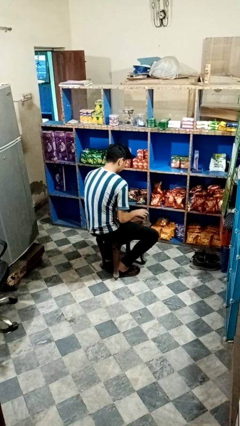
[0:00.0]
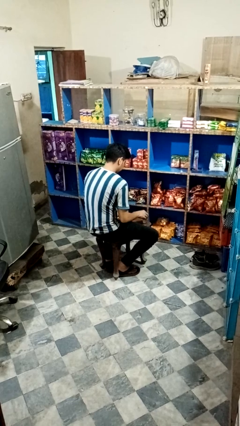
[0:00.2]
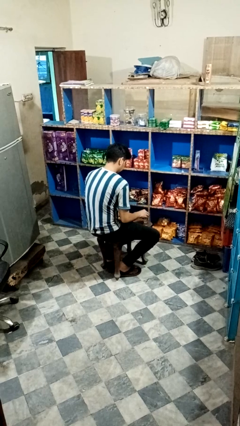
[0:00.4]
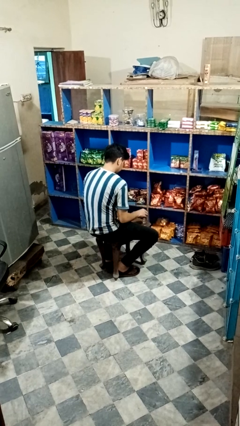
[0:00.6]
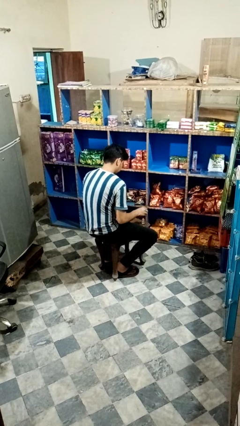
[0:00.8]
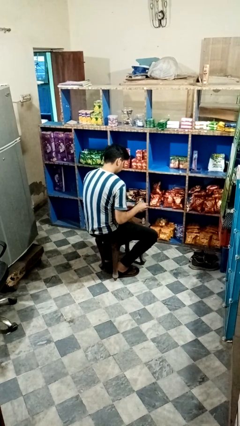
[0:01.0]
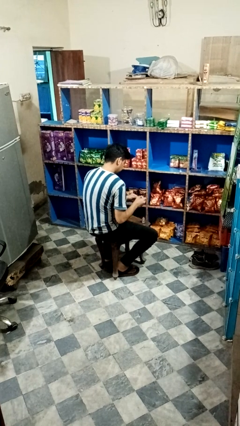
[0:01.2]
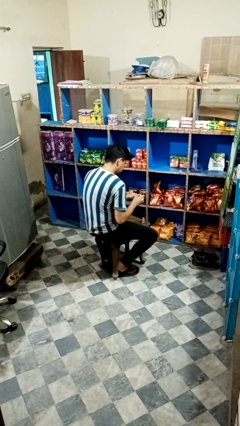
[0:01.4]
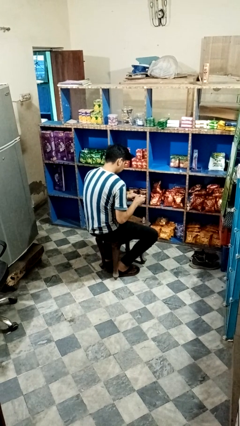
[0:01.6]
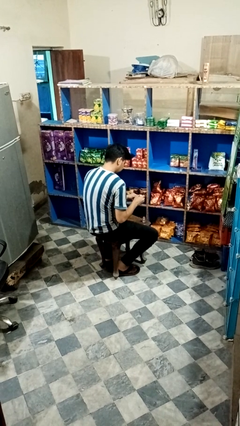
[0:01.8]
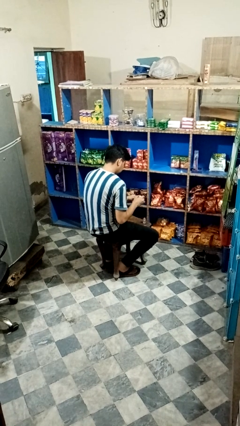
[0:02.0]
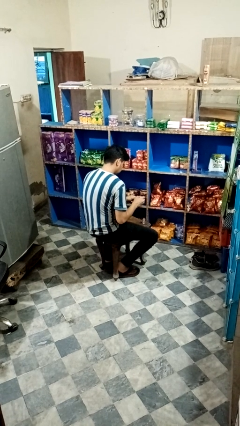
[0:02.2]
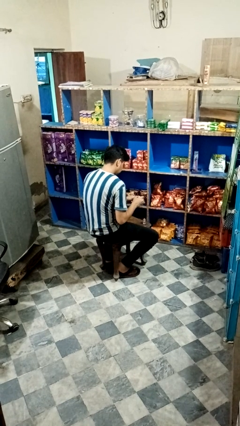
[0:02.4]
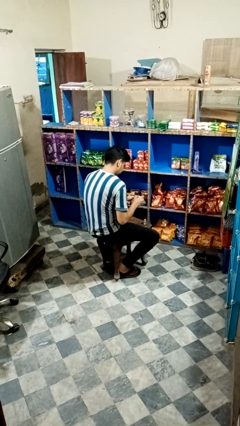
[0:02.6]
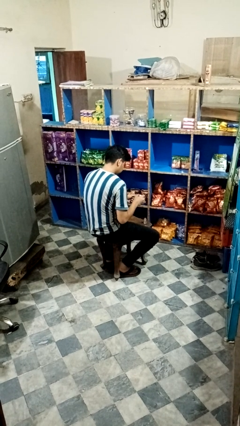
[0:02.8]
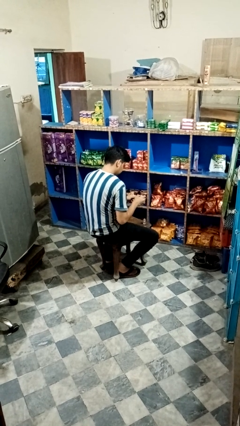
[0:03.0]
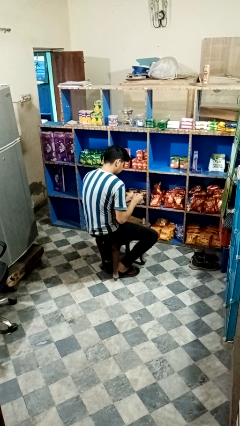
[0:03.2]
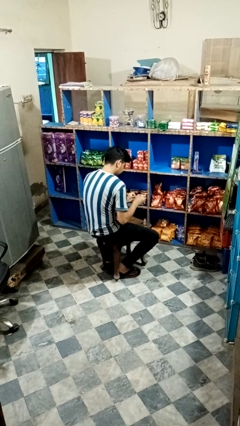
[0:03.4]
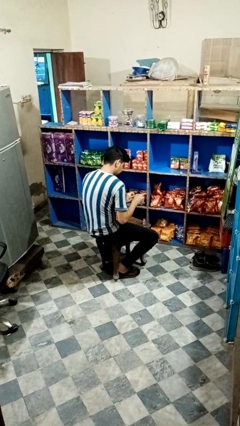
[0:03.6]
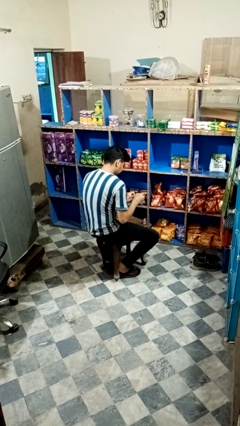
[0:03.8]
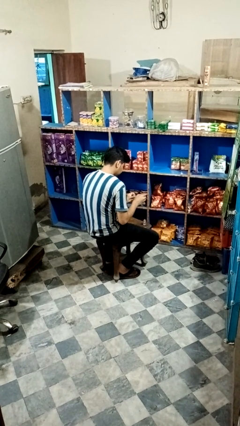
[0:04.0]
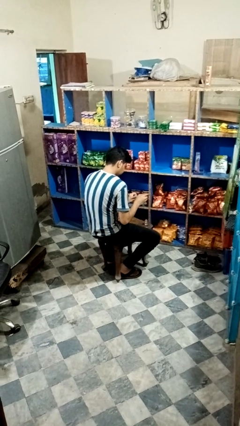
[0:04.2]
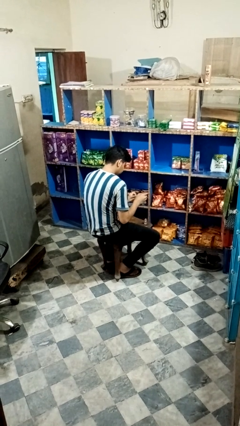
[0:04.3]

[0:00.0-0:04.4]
person paints fingernails

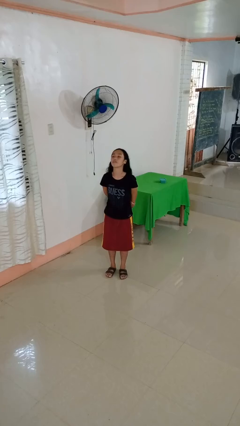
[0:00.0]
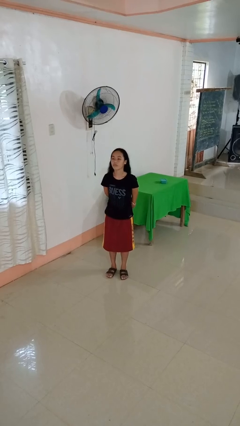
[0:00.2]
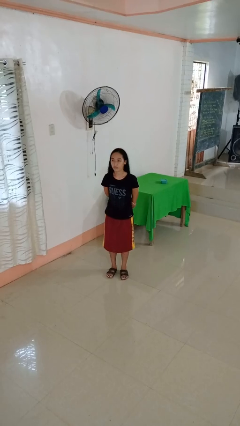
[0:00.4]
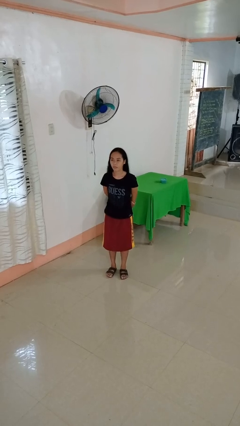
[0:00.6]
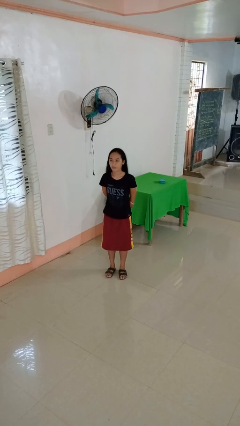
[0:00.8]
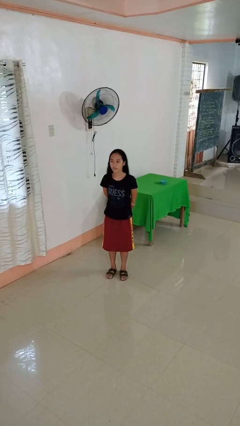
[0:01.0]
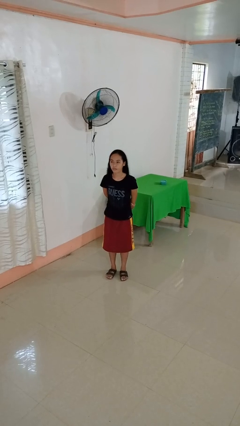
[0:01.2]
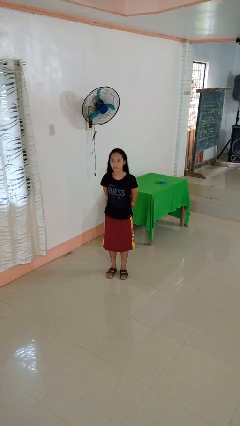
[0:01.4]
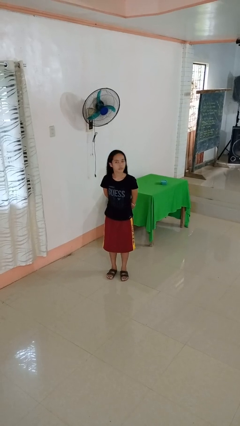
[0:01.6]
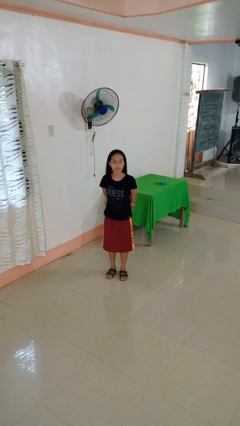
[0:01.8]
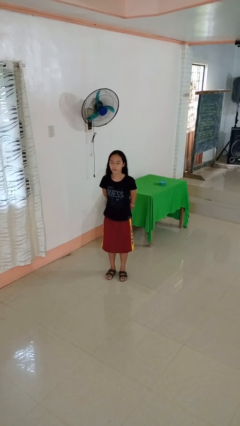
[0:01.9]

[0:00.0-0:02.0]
person nods head

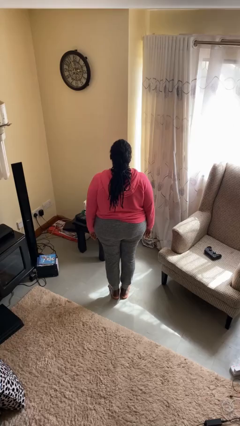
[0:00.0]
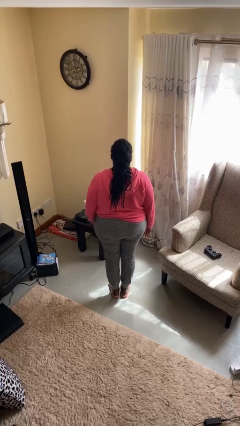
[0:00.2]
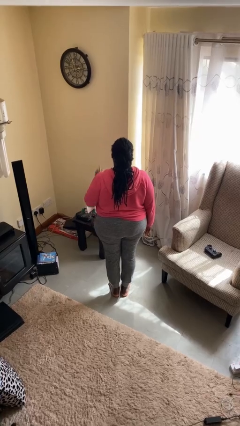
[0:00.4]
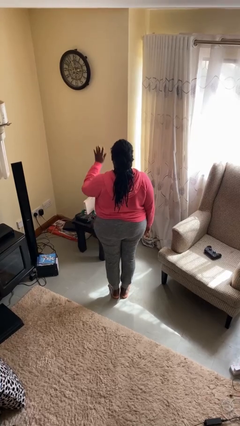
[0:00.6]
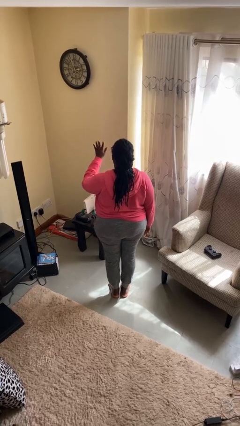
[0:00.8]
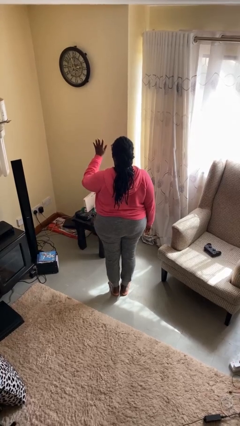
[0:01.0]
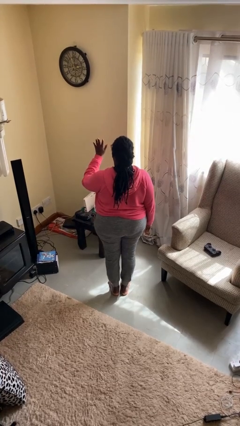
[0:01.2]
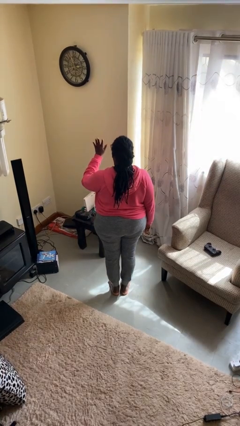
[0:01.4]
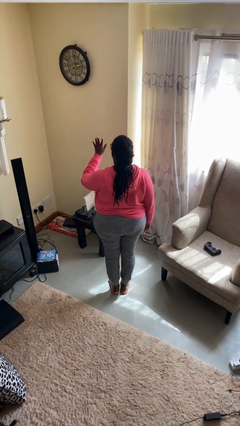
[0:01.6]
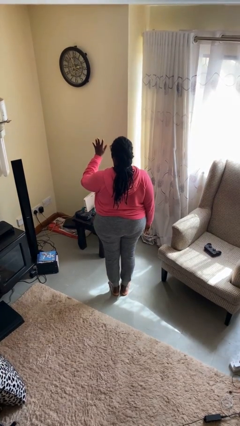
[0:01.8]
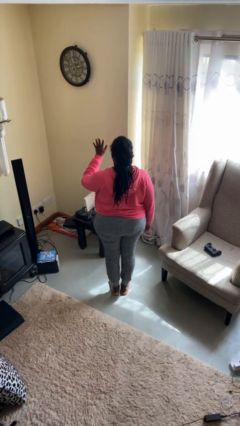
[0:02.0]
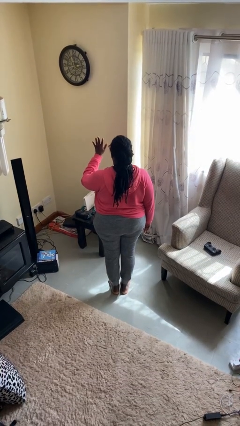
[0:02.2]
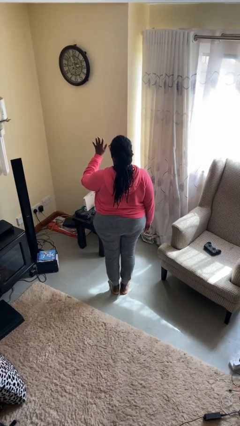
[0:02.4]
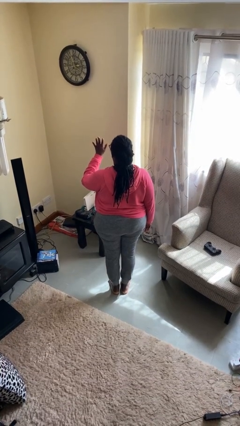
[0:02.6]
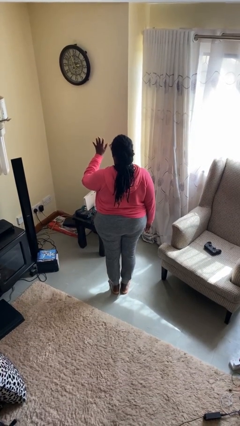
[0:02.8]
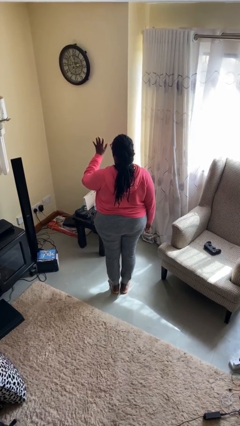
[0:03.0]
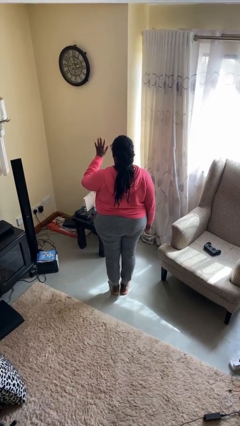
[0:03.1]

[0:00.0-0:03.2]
person gestures number five

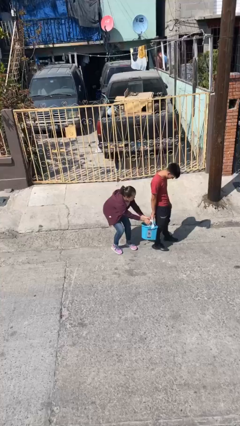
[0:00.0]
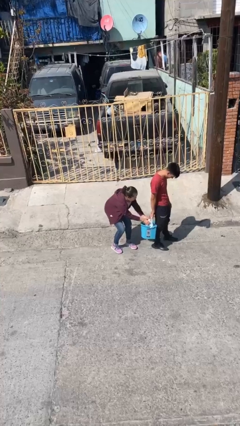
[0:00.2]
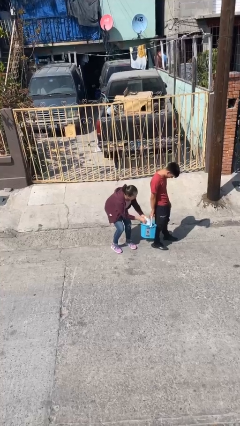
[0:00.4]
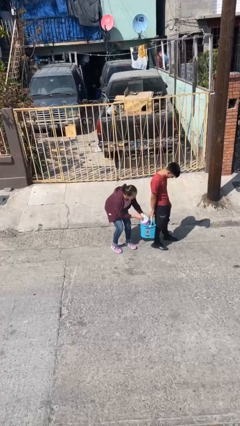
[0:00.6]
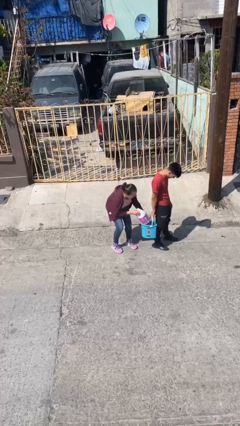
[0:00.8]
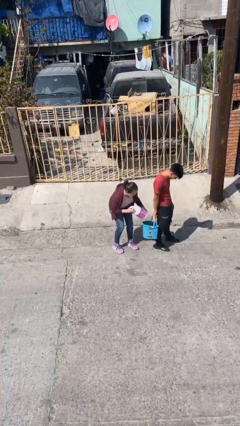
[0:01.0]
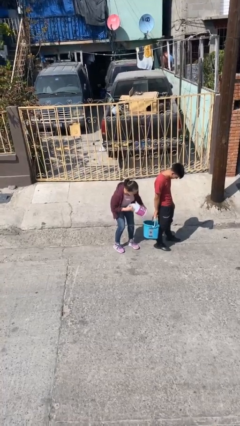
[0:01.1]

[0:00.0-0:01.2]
person steals object from person

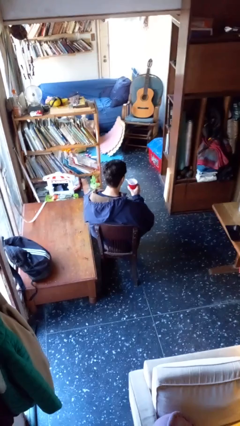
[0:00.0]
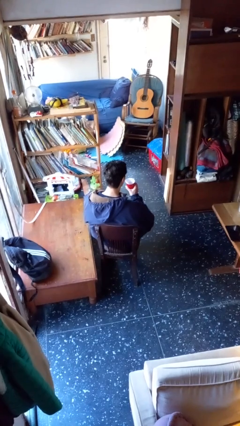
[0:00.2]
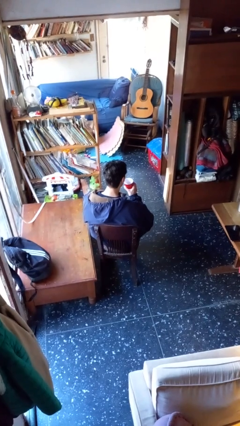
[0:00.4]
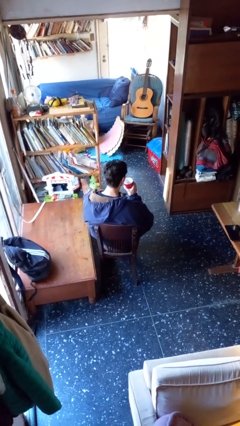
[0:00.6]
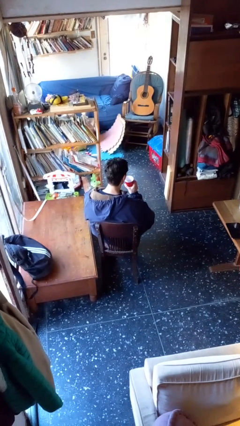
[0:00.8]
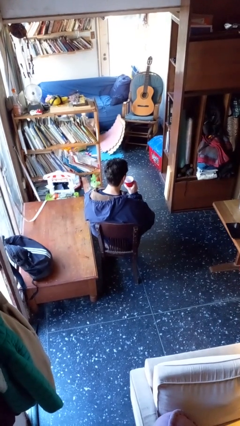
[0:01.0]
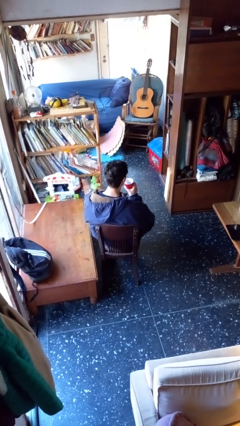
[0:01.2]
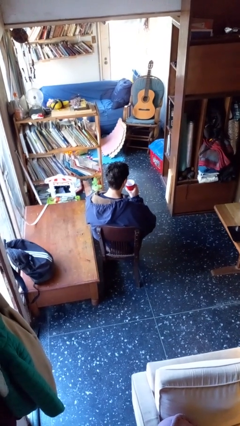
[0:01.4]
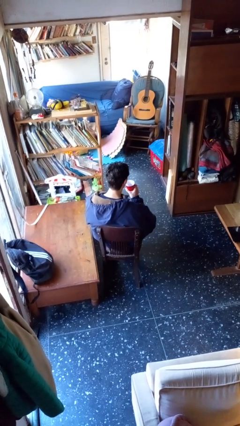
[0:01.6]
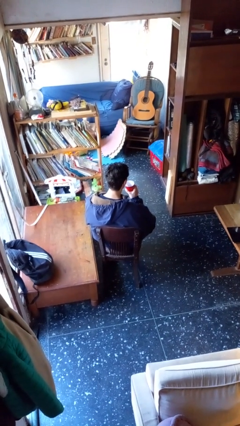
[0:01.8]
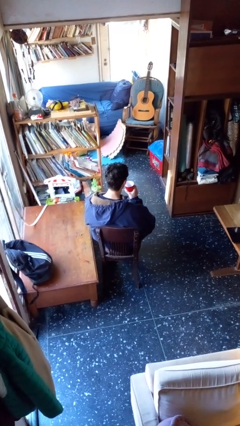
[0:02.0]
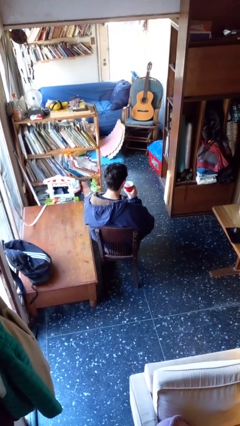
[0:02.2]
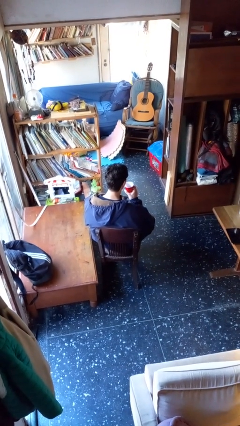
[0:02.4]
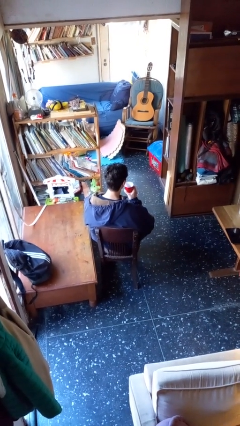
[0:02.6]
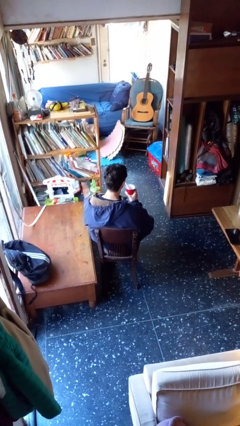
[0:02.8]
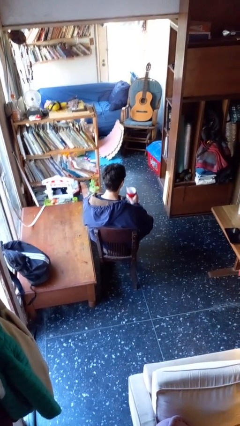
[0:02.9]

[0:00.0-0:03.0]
person drinks from straw

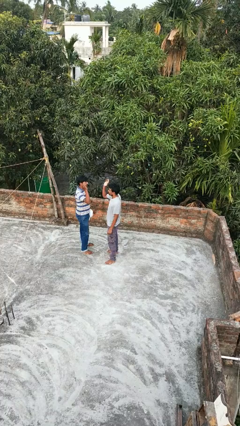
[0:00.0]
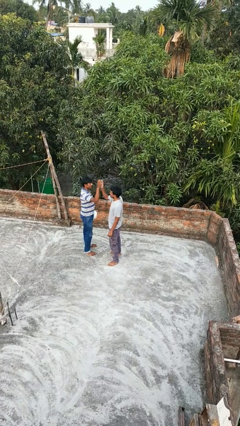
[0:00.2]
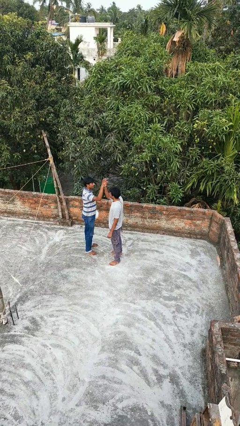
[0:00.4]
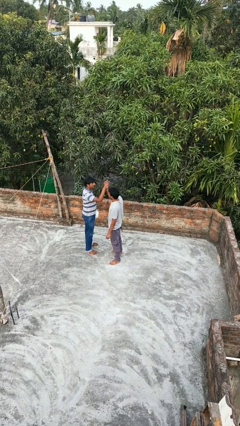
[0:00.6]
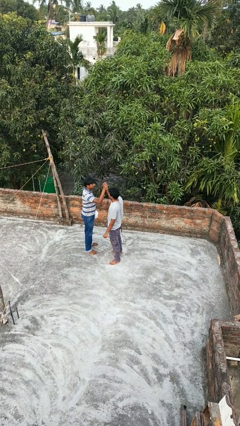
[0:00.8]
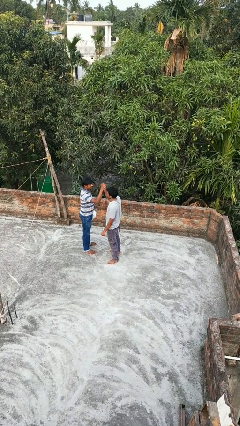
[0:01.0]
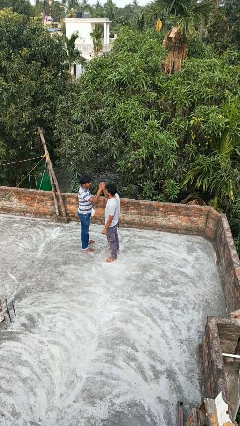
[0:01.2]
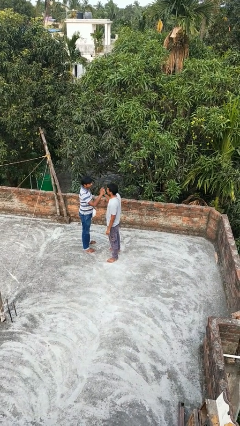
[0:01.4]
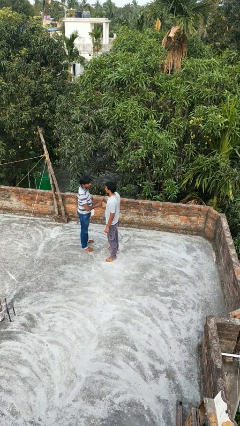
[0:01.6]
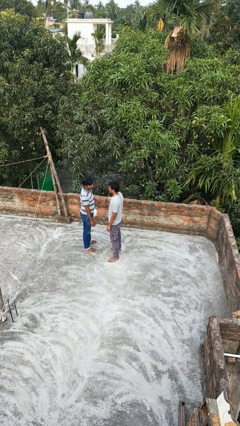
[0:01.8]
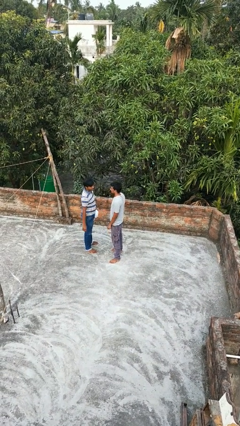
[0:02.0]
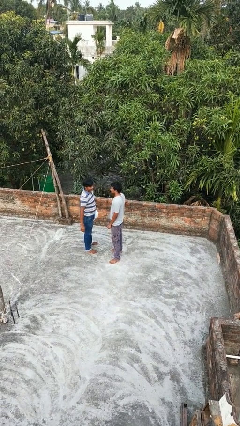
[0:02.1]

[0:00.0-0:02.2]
person highfives hand

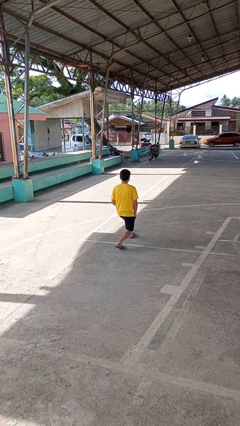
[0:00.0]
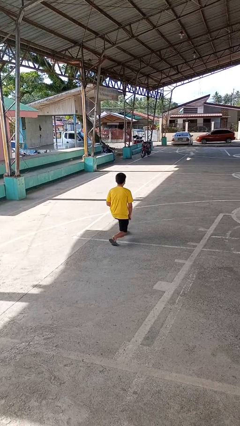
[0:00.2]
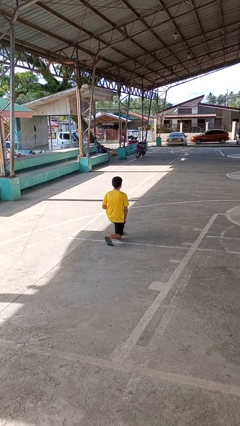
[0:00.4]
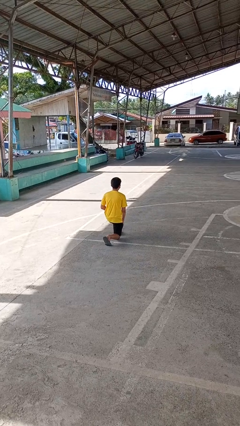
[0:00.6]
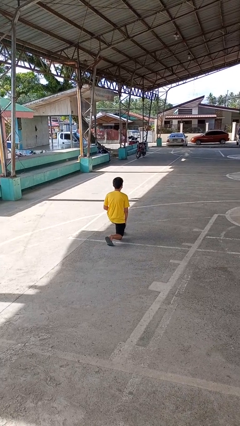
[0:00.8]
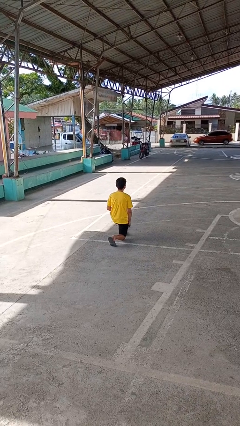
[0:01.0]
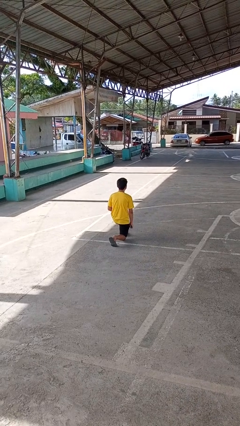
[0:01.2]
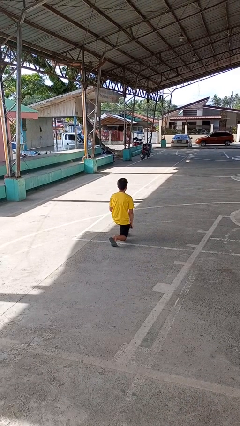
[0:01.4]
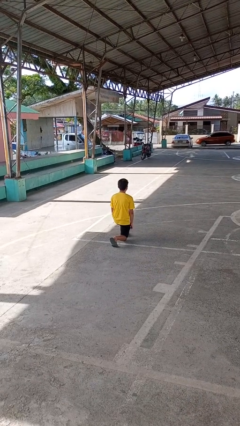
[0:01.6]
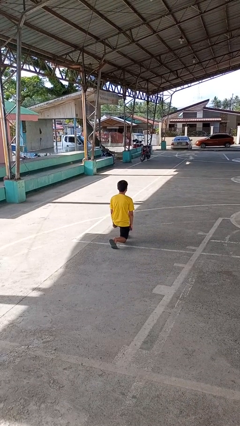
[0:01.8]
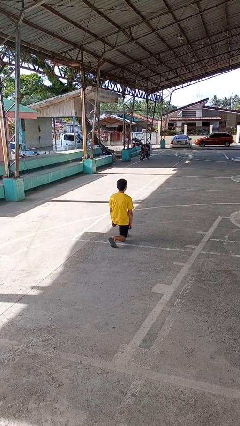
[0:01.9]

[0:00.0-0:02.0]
person kneels
